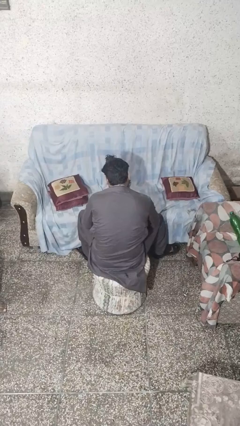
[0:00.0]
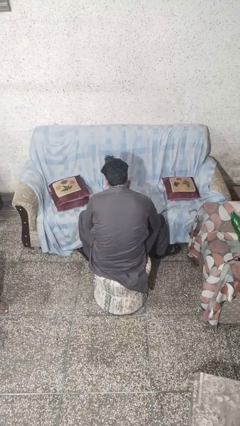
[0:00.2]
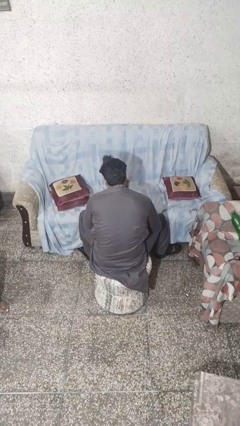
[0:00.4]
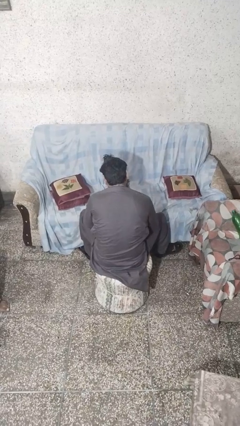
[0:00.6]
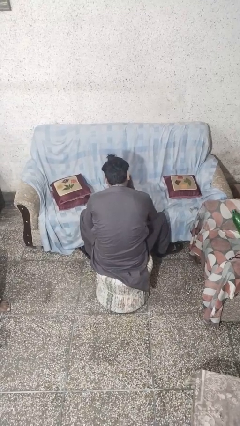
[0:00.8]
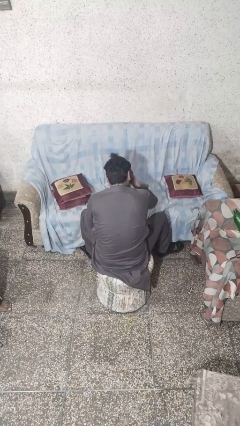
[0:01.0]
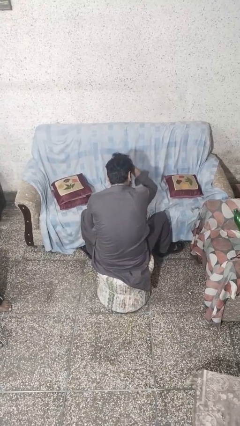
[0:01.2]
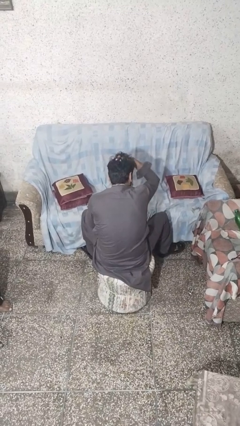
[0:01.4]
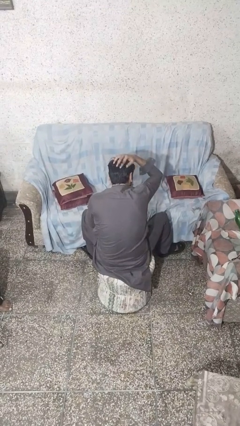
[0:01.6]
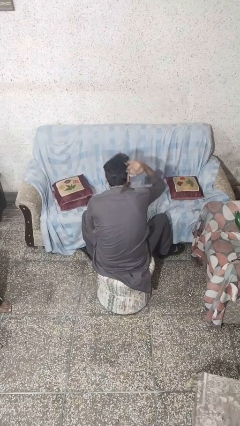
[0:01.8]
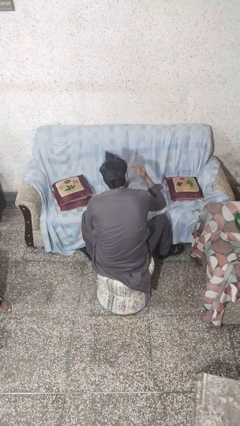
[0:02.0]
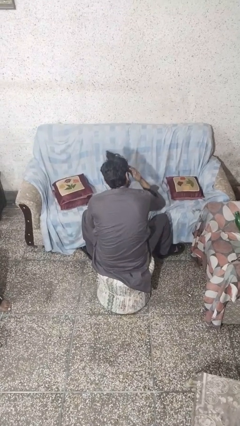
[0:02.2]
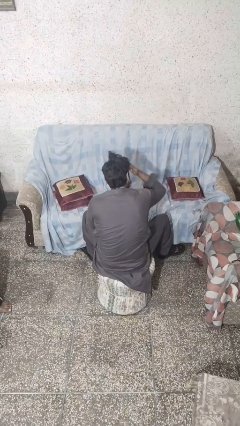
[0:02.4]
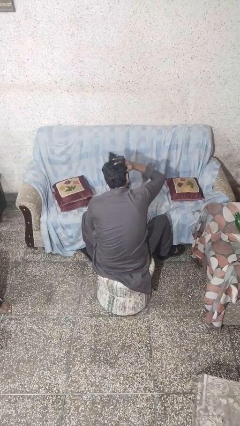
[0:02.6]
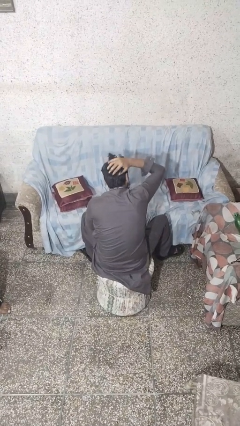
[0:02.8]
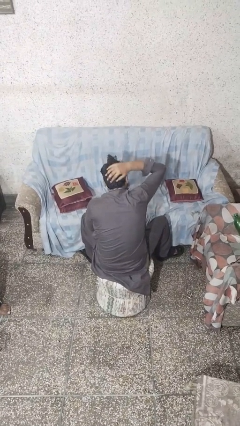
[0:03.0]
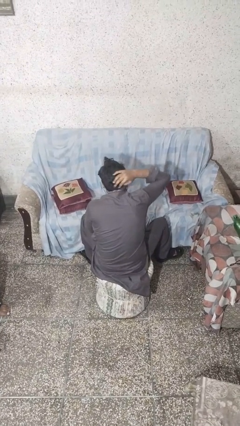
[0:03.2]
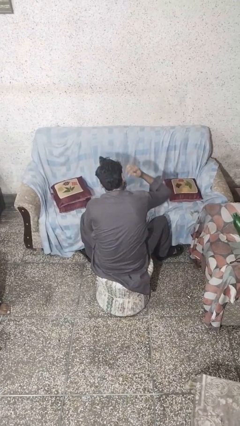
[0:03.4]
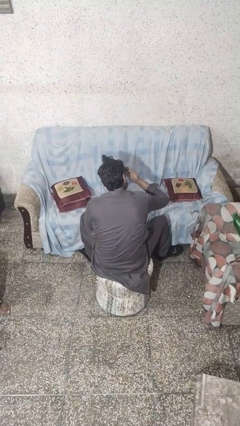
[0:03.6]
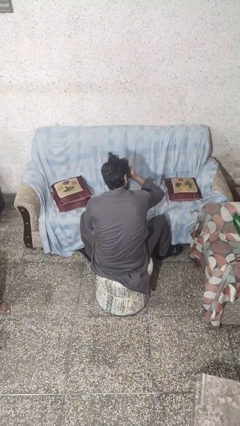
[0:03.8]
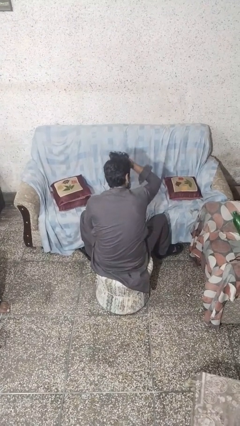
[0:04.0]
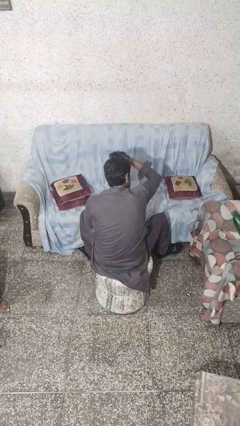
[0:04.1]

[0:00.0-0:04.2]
person strokes hair

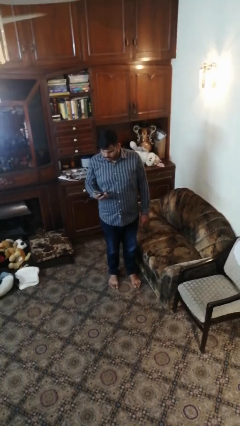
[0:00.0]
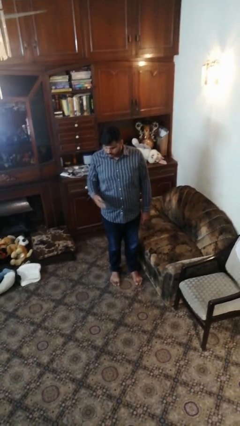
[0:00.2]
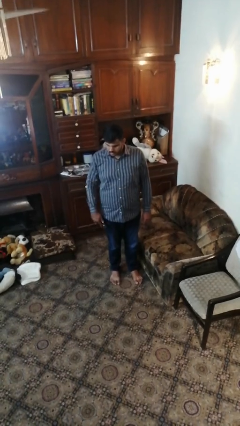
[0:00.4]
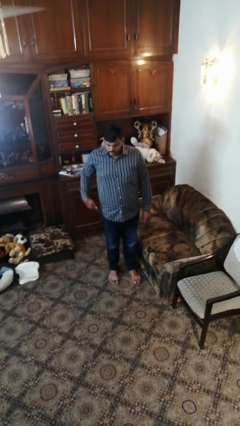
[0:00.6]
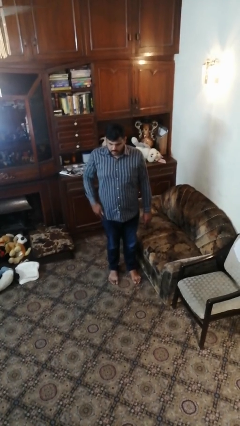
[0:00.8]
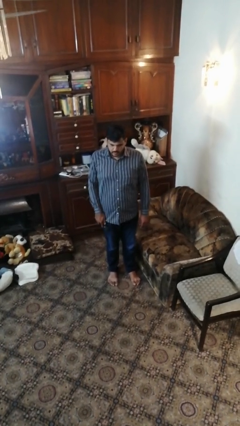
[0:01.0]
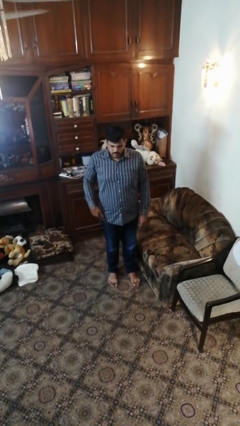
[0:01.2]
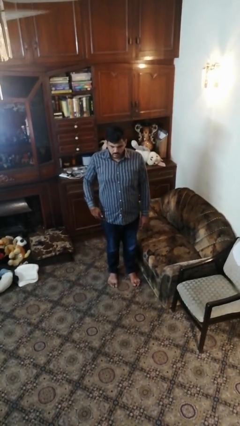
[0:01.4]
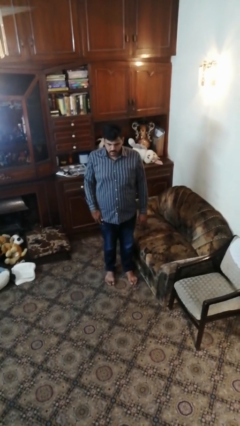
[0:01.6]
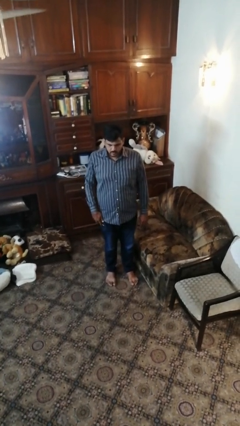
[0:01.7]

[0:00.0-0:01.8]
person puts phone into pocket

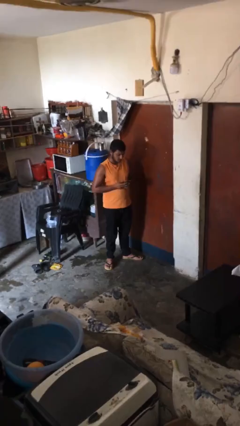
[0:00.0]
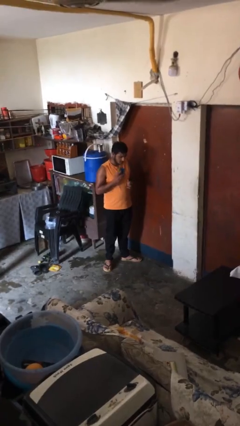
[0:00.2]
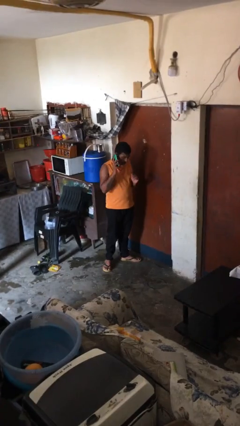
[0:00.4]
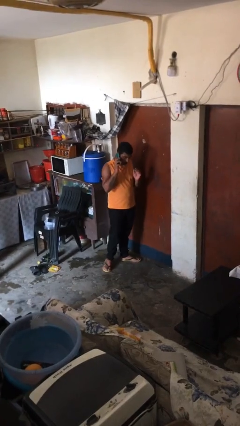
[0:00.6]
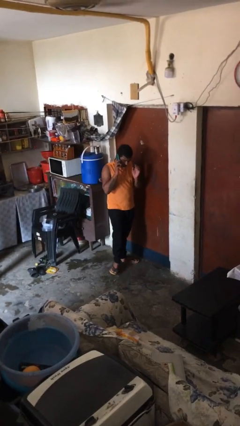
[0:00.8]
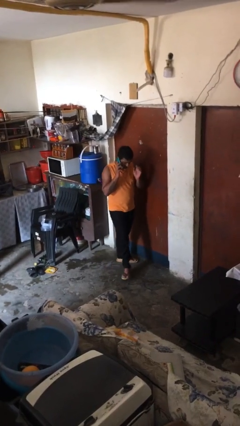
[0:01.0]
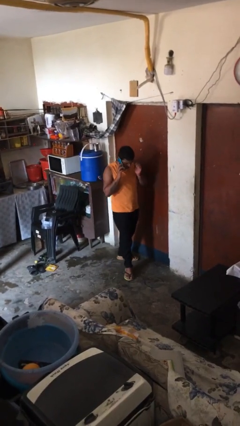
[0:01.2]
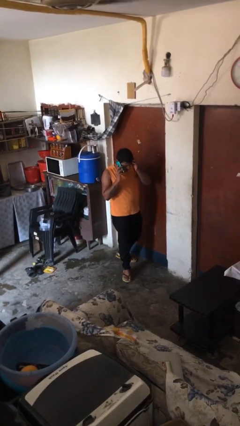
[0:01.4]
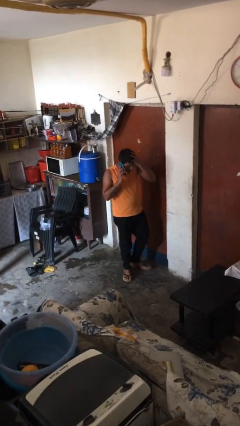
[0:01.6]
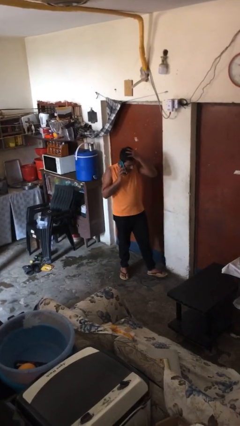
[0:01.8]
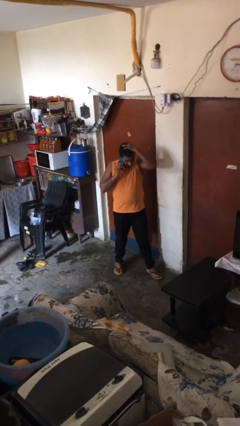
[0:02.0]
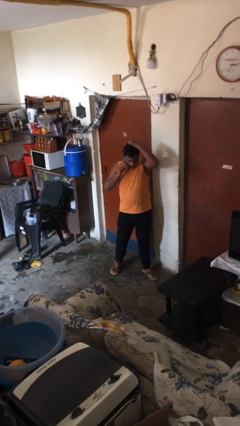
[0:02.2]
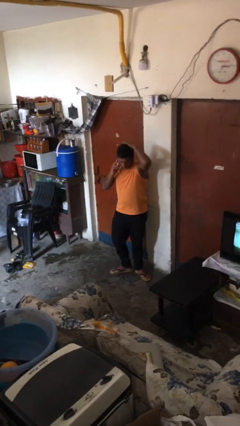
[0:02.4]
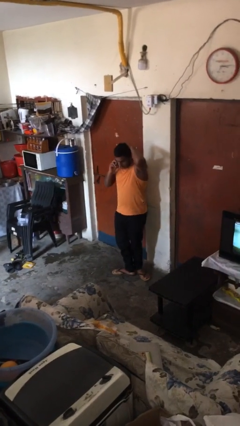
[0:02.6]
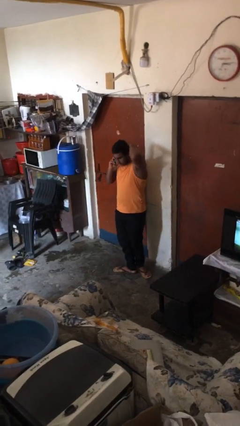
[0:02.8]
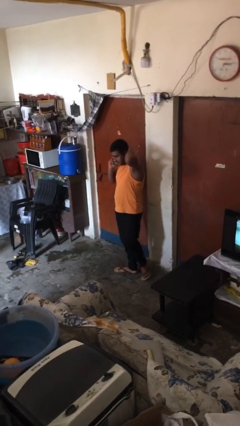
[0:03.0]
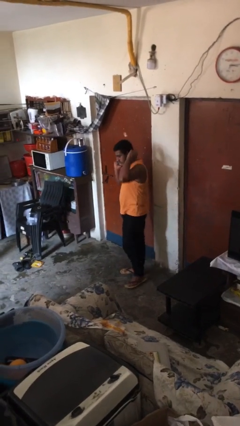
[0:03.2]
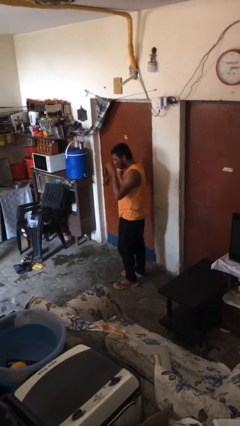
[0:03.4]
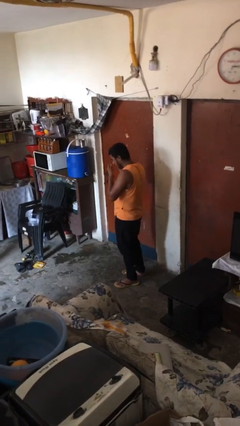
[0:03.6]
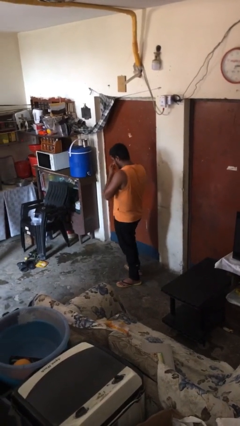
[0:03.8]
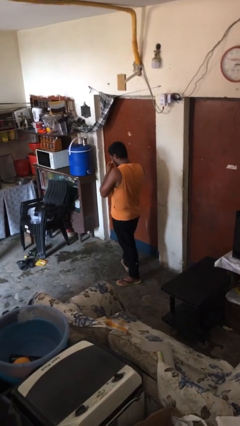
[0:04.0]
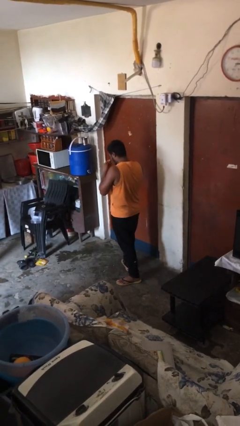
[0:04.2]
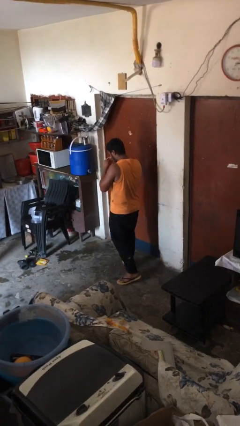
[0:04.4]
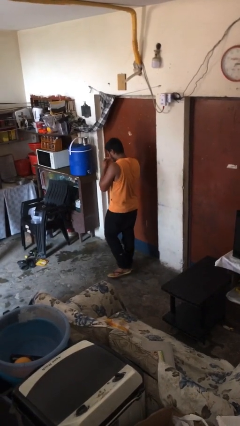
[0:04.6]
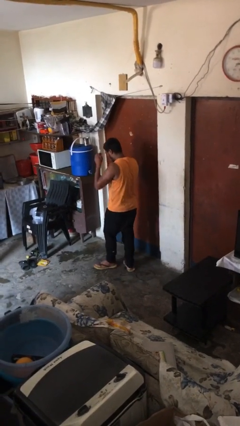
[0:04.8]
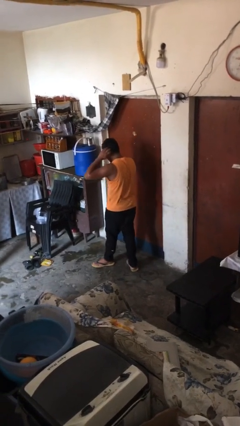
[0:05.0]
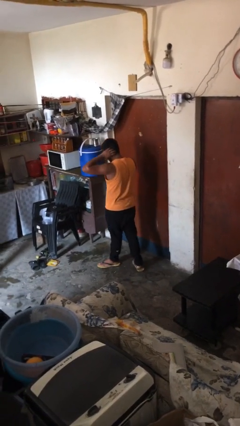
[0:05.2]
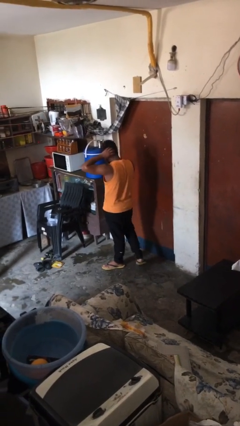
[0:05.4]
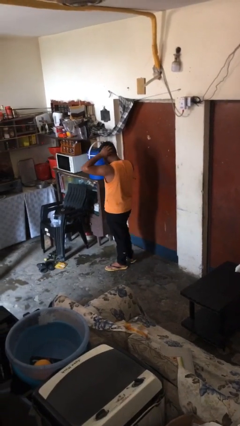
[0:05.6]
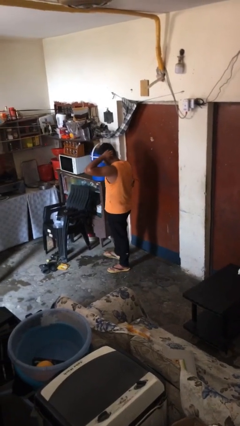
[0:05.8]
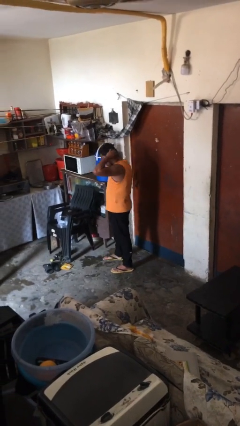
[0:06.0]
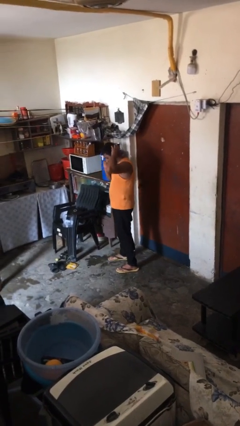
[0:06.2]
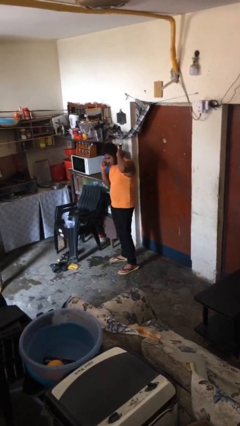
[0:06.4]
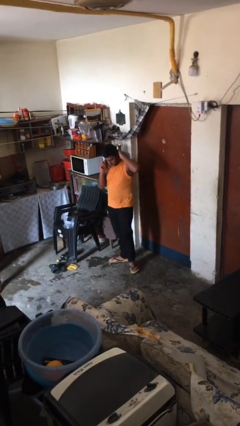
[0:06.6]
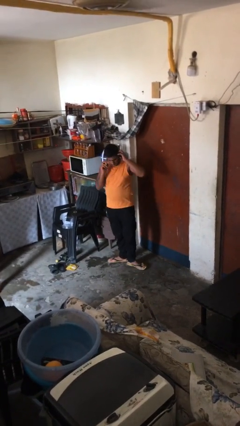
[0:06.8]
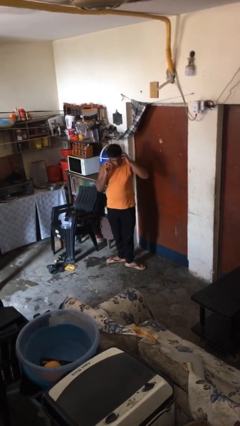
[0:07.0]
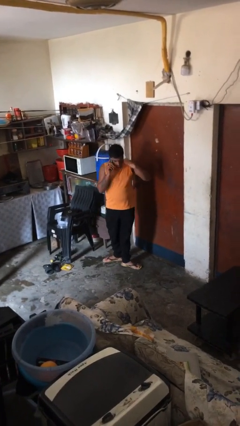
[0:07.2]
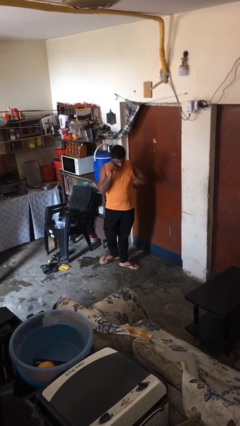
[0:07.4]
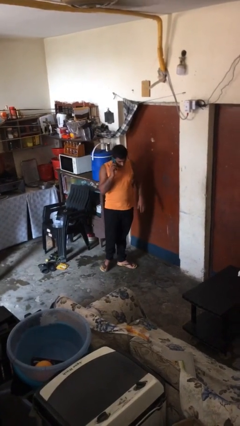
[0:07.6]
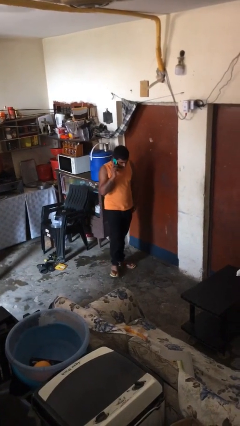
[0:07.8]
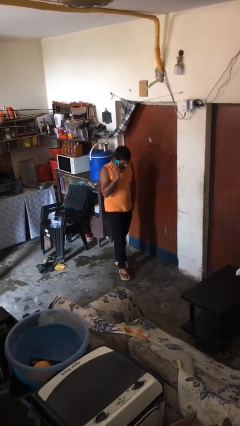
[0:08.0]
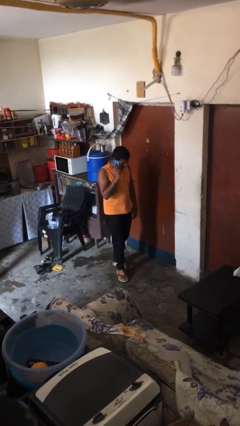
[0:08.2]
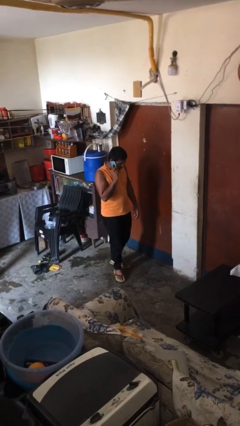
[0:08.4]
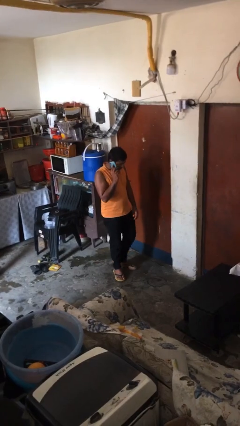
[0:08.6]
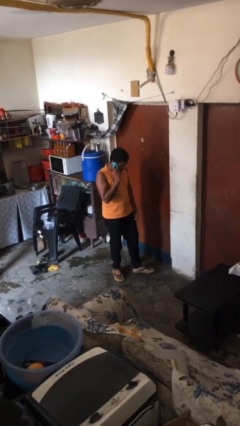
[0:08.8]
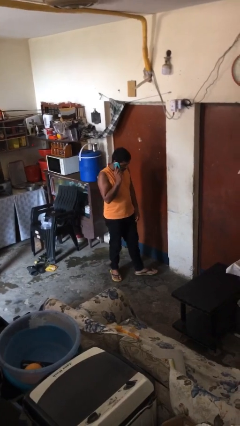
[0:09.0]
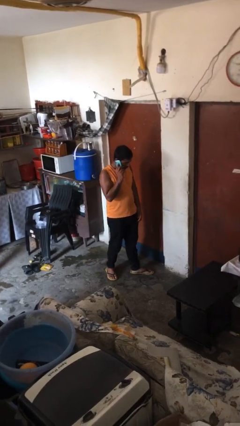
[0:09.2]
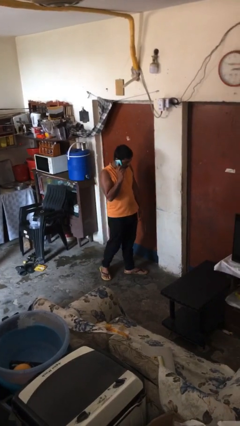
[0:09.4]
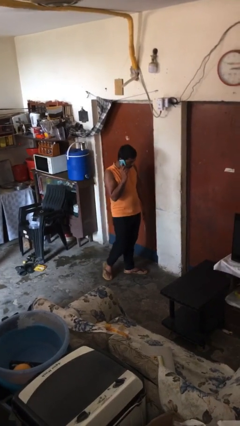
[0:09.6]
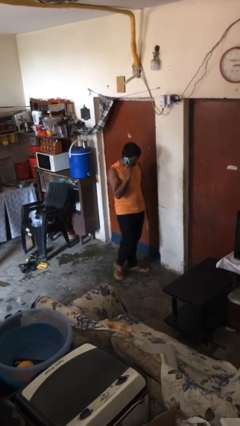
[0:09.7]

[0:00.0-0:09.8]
person talks on phone

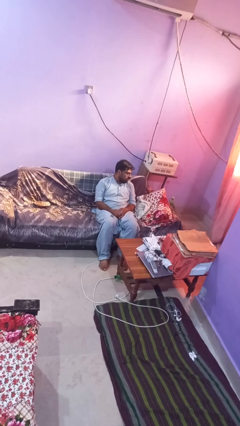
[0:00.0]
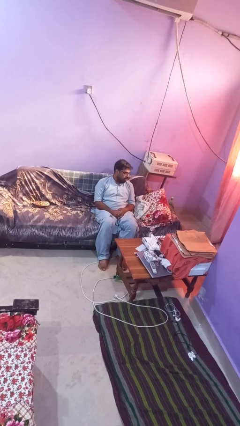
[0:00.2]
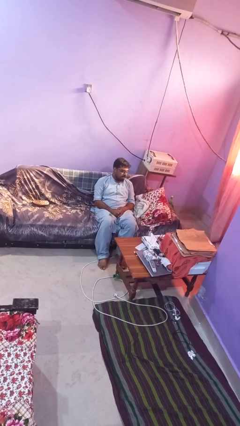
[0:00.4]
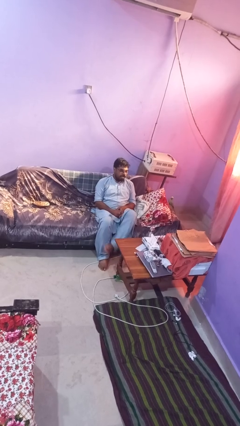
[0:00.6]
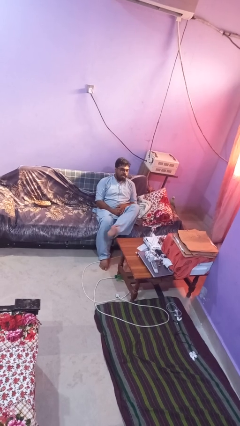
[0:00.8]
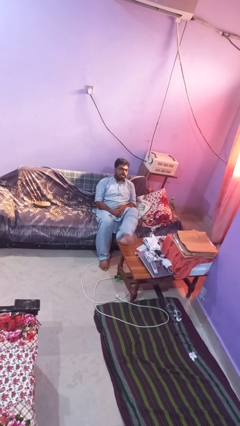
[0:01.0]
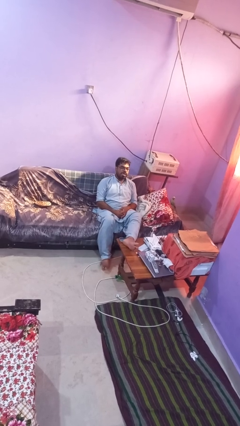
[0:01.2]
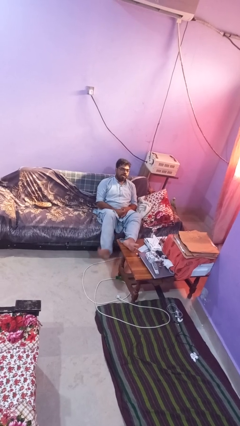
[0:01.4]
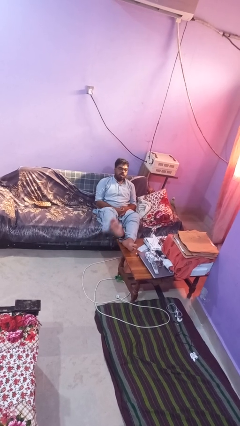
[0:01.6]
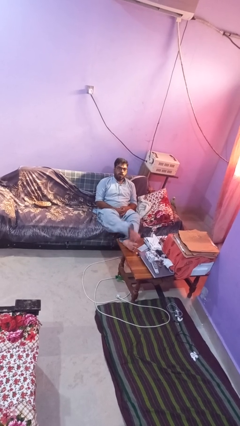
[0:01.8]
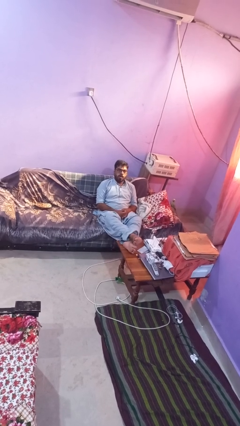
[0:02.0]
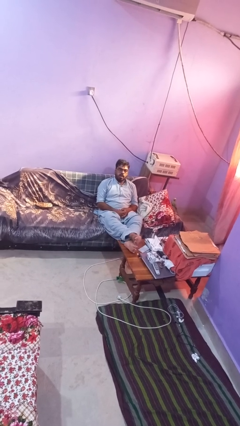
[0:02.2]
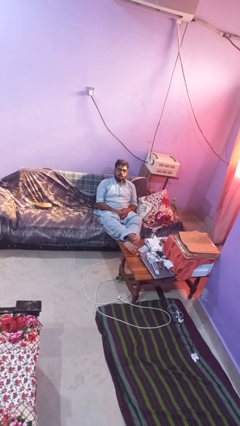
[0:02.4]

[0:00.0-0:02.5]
person puts feet up
